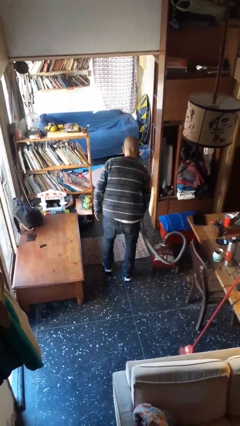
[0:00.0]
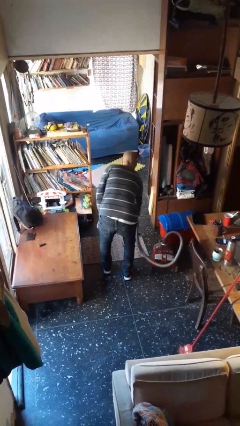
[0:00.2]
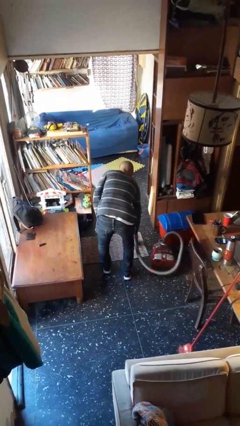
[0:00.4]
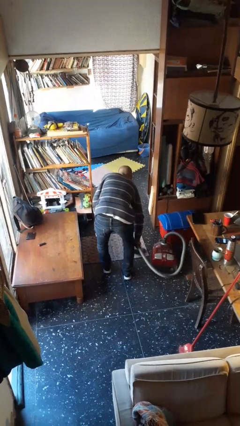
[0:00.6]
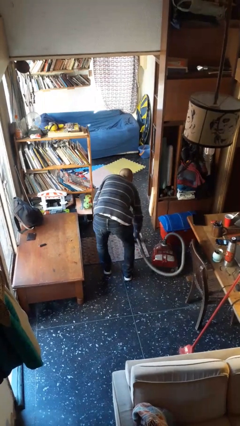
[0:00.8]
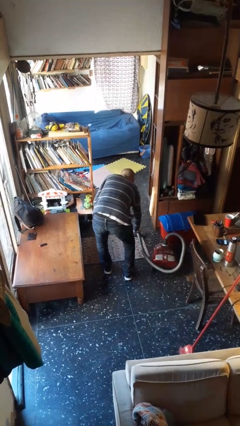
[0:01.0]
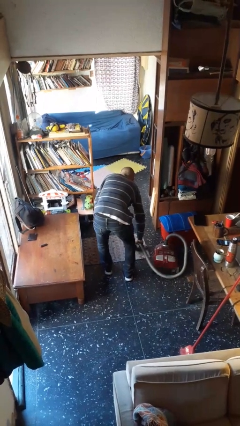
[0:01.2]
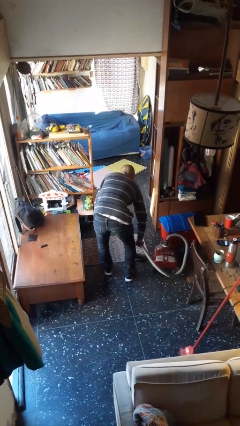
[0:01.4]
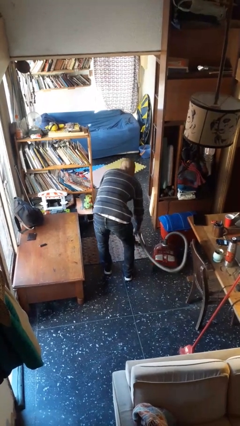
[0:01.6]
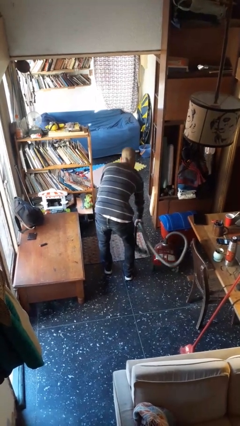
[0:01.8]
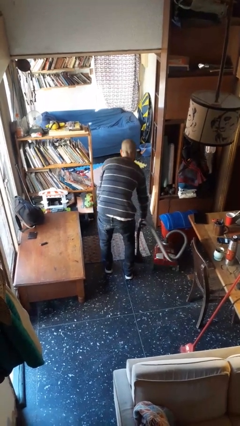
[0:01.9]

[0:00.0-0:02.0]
person vacuums carpet

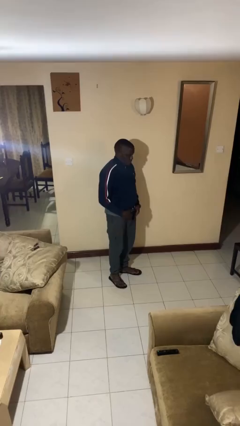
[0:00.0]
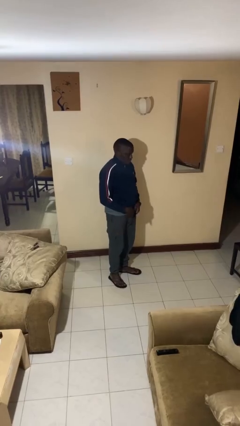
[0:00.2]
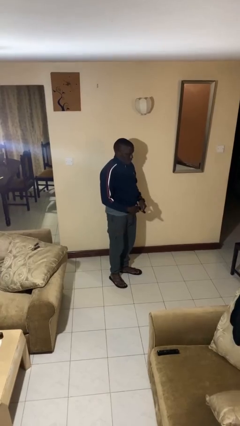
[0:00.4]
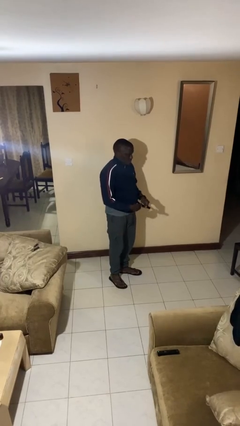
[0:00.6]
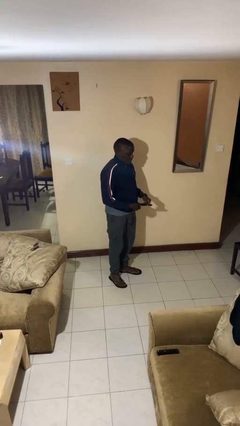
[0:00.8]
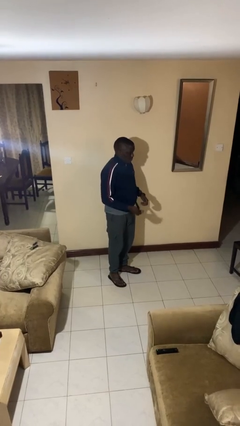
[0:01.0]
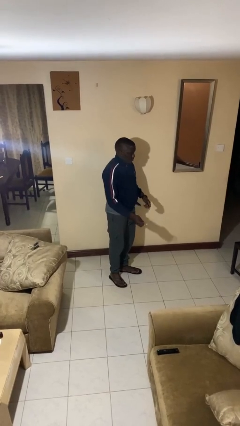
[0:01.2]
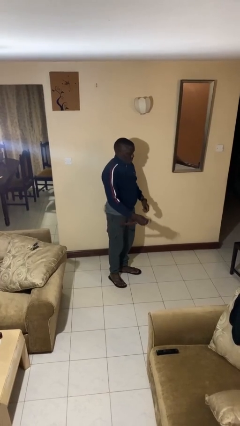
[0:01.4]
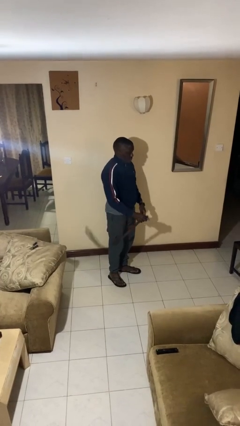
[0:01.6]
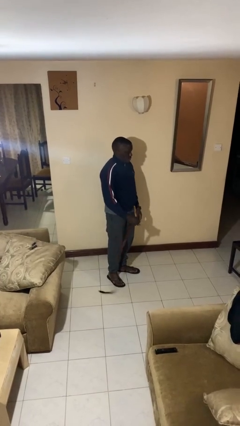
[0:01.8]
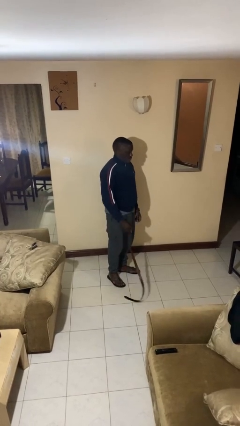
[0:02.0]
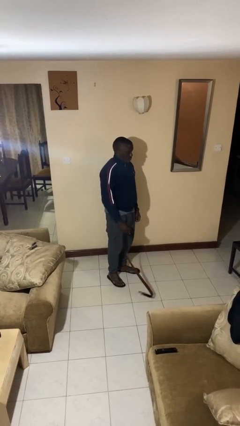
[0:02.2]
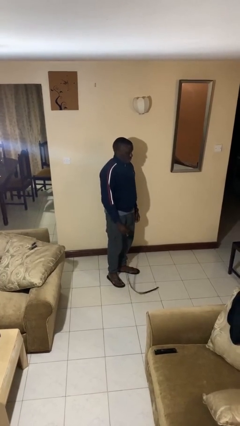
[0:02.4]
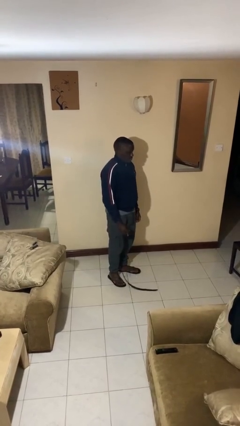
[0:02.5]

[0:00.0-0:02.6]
person takes off belt

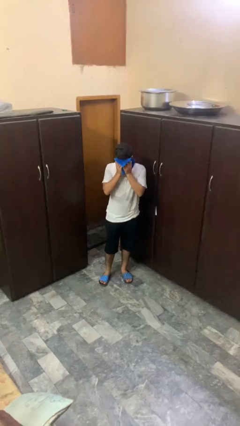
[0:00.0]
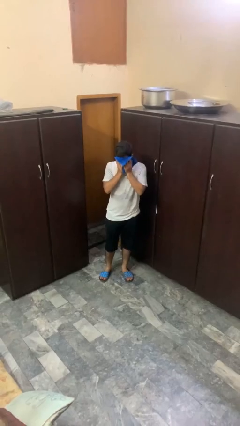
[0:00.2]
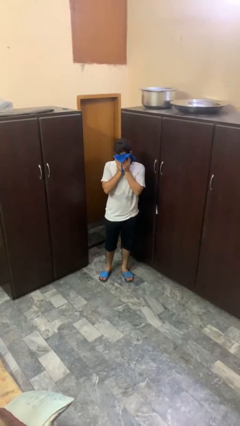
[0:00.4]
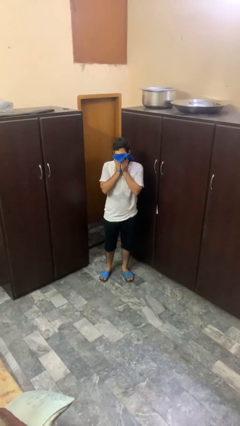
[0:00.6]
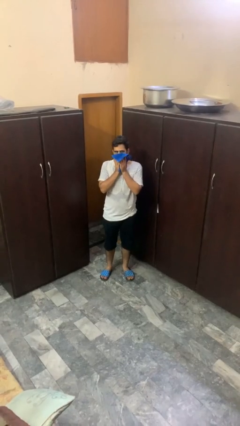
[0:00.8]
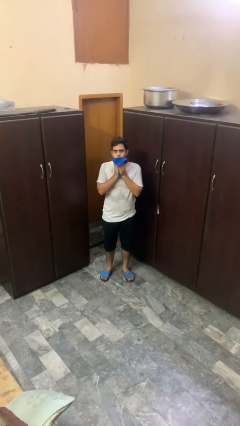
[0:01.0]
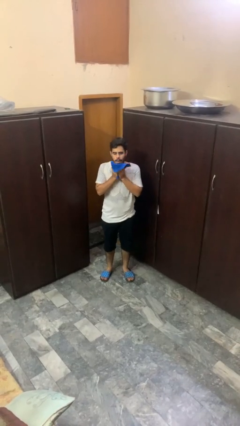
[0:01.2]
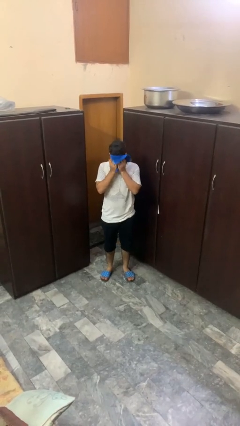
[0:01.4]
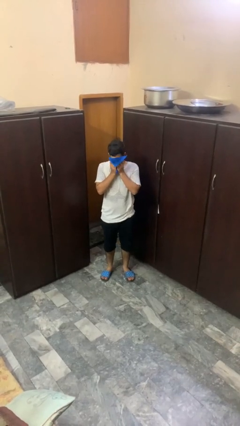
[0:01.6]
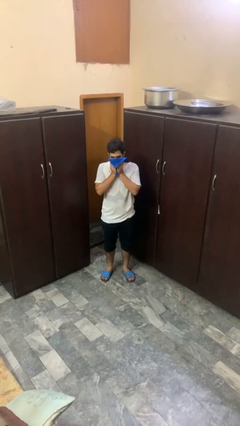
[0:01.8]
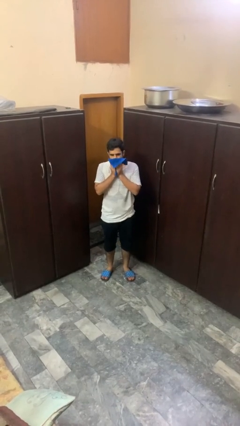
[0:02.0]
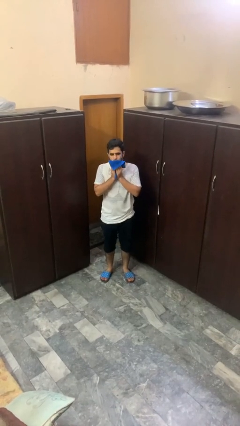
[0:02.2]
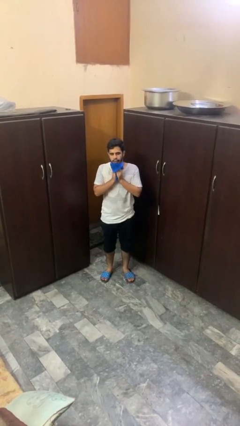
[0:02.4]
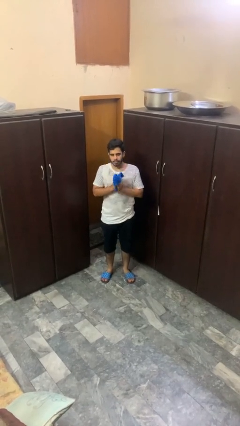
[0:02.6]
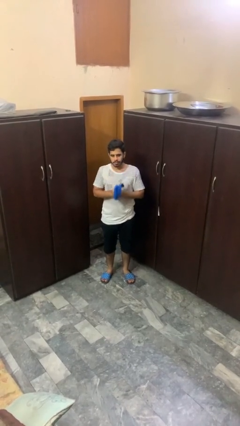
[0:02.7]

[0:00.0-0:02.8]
person wipes mouth with napkin

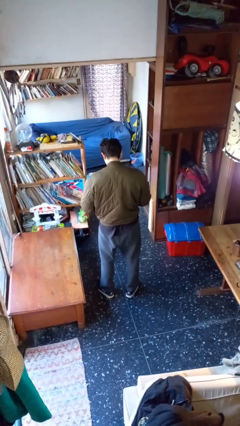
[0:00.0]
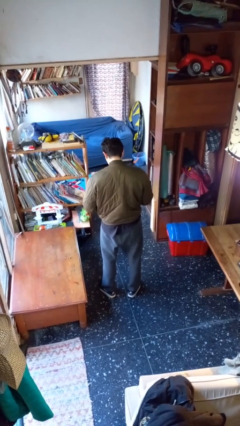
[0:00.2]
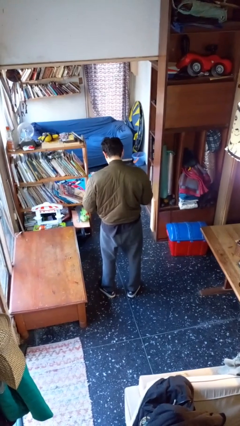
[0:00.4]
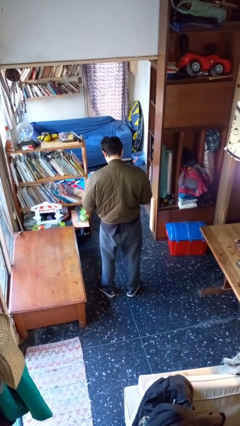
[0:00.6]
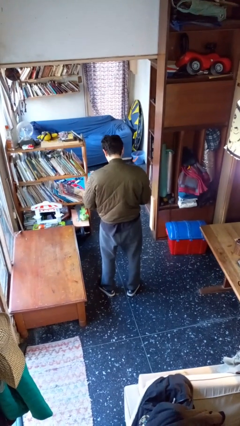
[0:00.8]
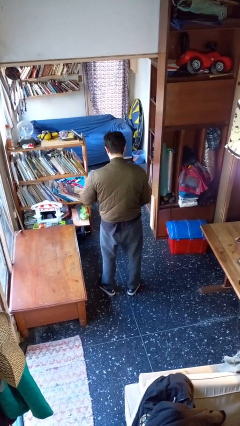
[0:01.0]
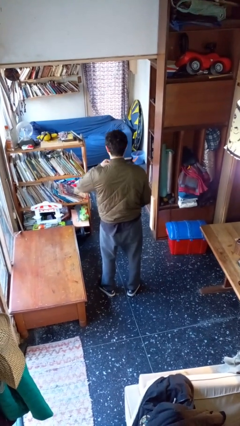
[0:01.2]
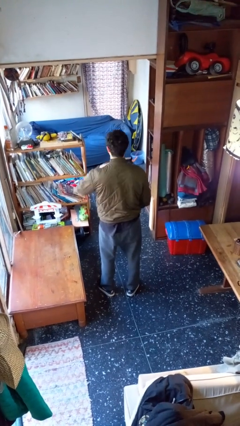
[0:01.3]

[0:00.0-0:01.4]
person zips up jacket

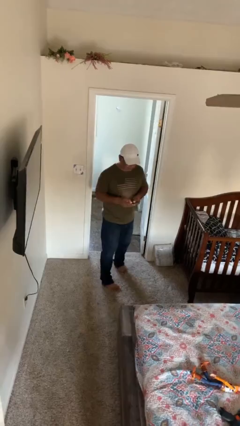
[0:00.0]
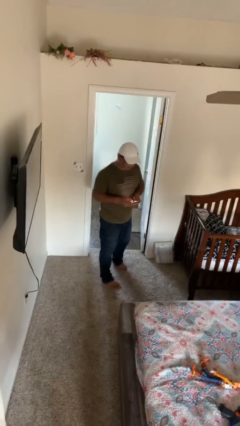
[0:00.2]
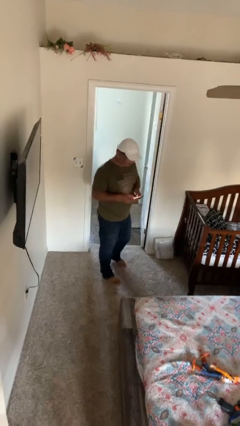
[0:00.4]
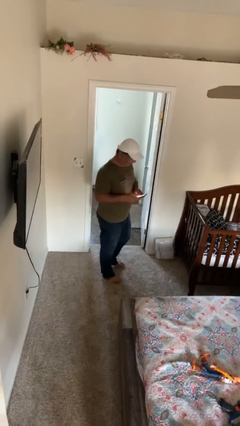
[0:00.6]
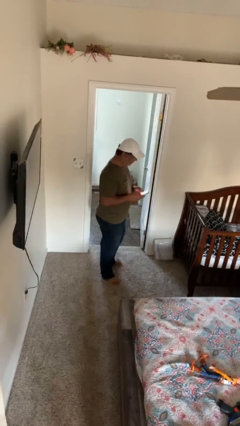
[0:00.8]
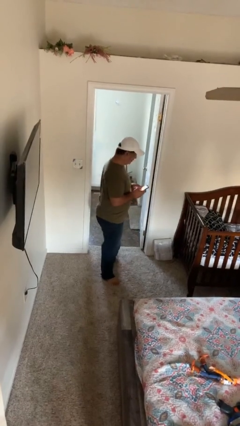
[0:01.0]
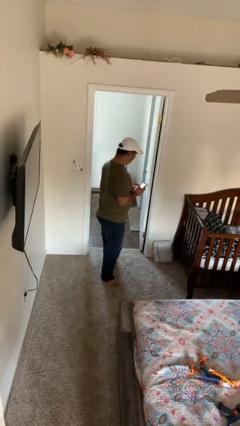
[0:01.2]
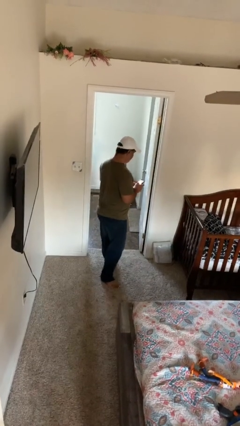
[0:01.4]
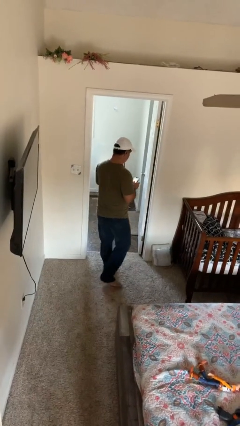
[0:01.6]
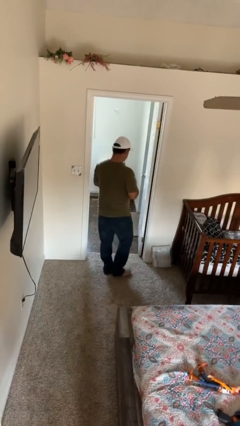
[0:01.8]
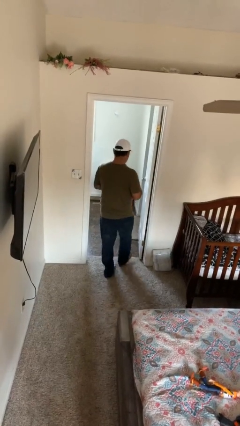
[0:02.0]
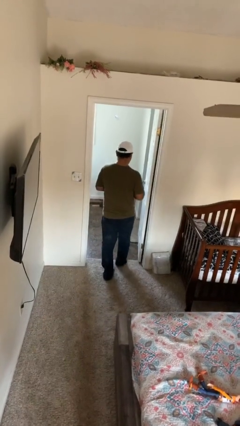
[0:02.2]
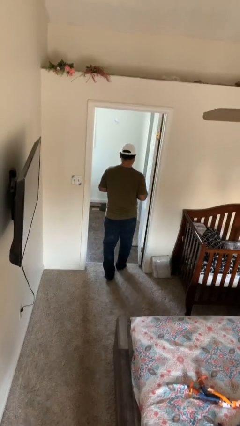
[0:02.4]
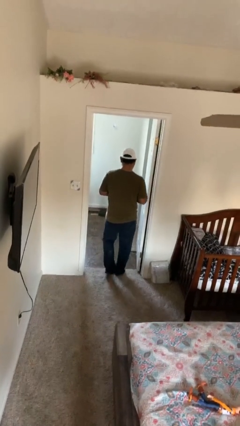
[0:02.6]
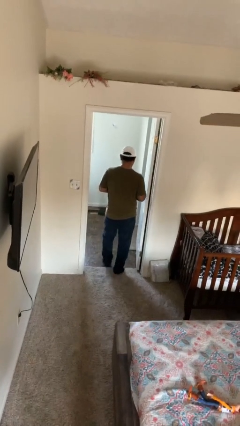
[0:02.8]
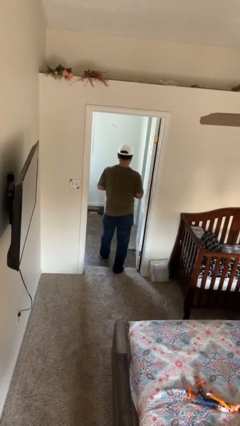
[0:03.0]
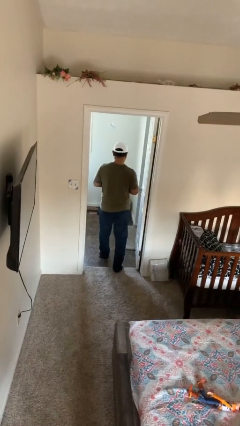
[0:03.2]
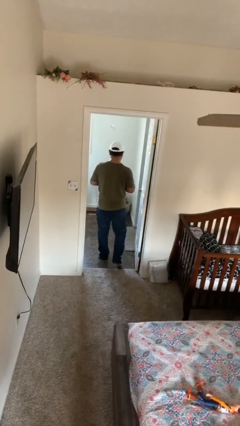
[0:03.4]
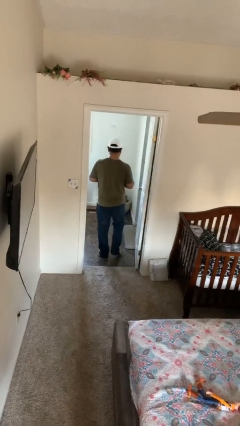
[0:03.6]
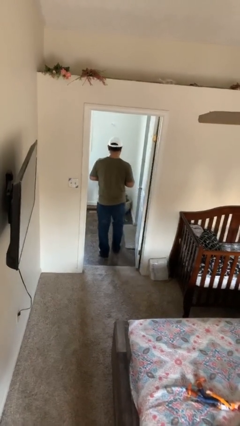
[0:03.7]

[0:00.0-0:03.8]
person exits scene through structure

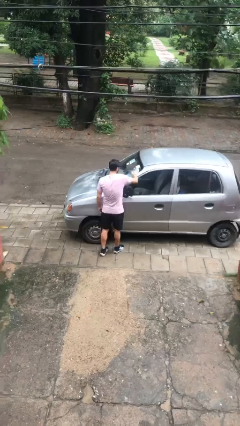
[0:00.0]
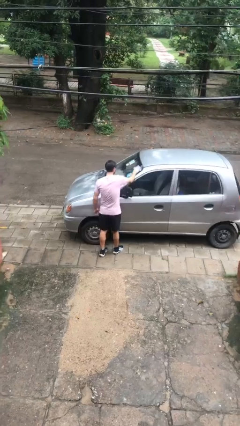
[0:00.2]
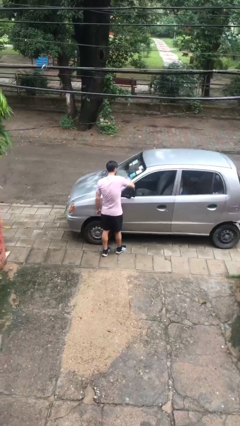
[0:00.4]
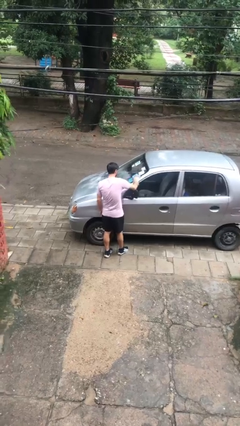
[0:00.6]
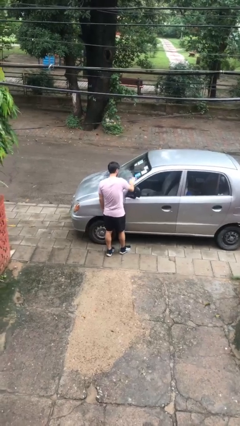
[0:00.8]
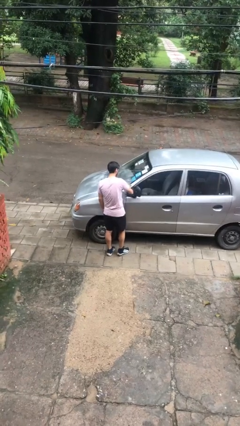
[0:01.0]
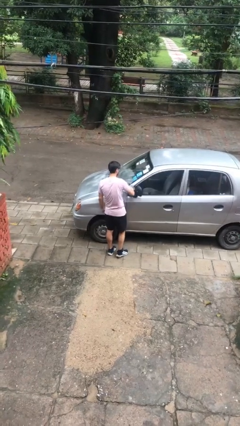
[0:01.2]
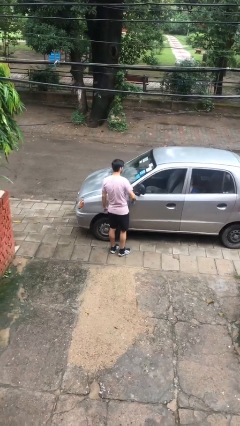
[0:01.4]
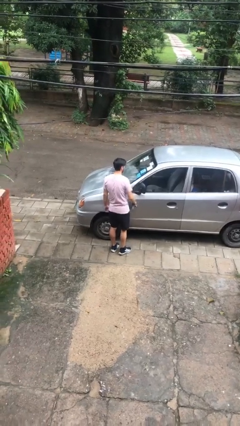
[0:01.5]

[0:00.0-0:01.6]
person polishes car with rag

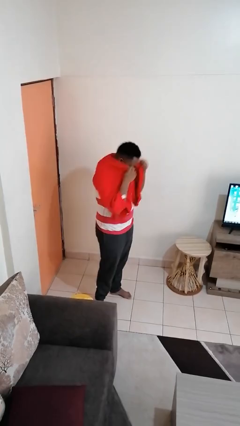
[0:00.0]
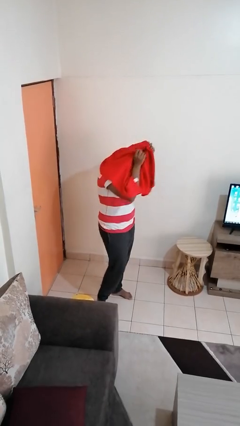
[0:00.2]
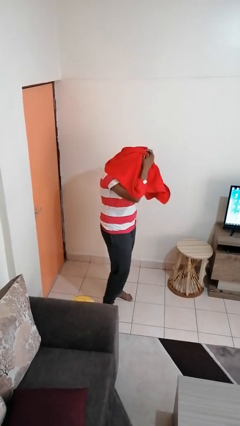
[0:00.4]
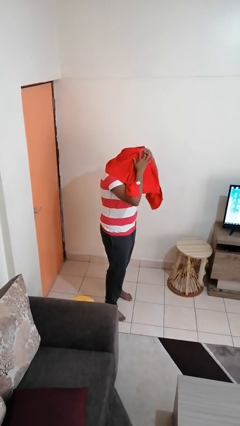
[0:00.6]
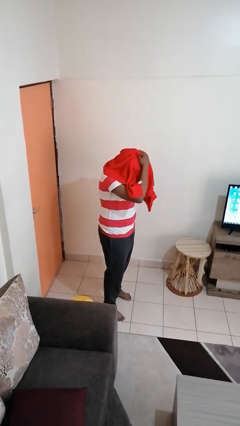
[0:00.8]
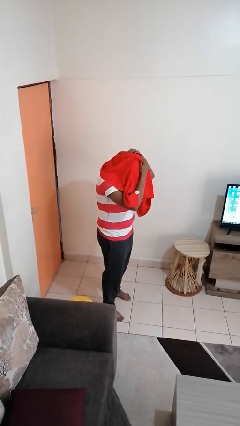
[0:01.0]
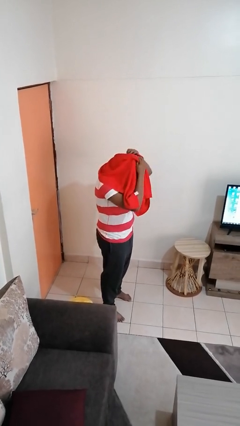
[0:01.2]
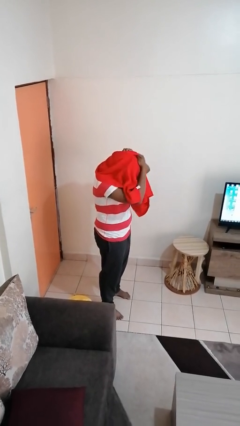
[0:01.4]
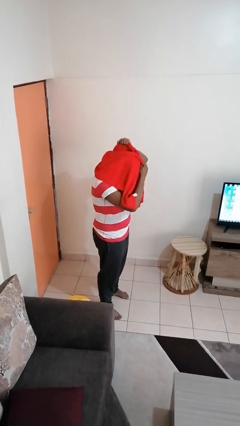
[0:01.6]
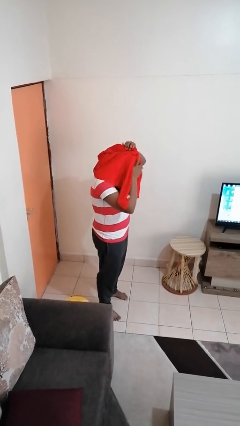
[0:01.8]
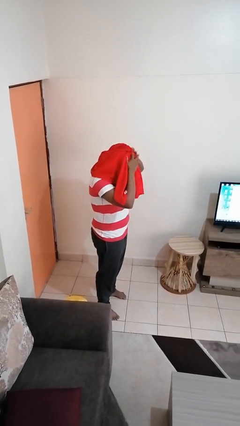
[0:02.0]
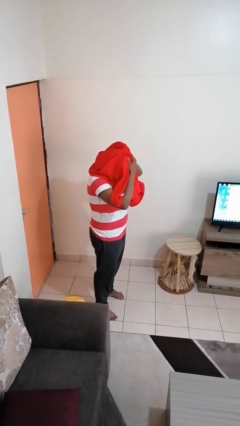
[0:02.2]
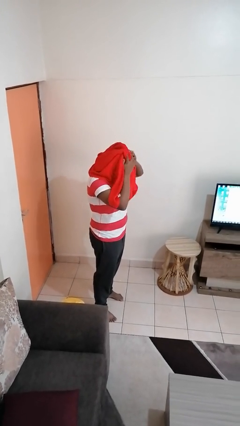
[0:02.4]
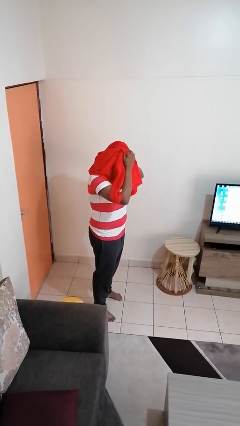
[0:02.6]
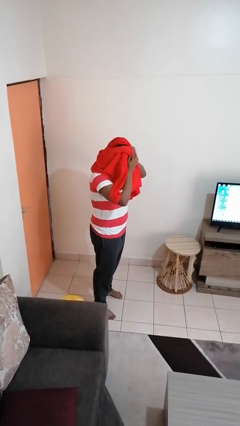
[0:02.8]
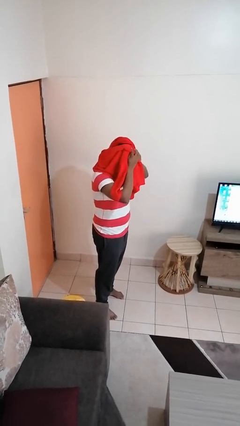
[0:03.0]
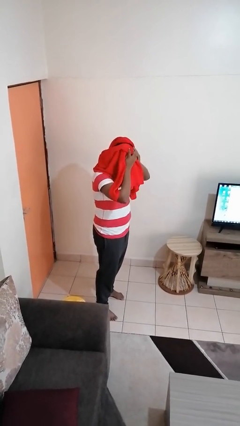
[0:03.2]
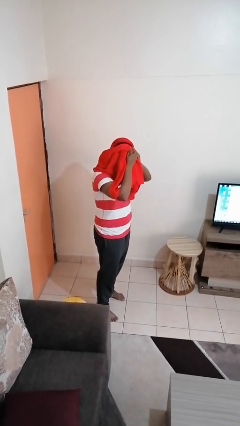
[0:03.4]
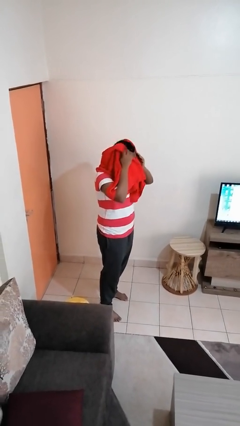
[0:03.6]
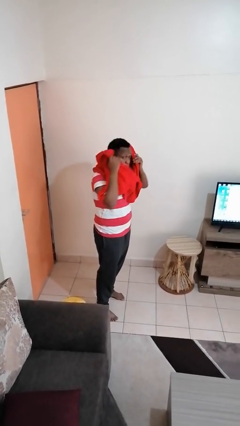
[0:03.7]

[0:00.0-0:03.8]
person dries hair with towel
